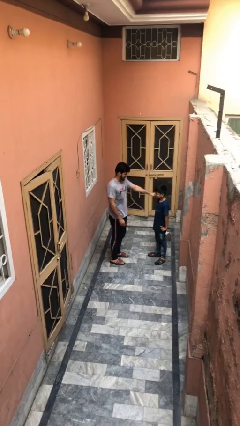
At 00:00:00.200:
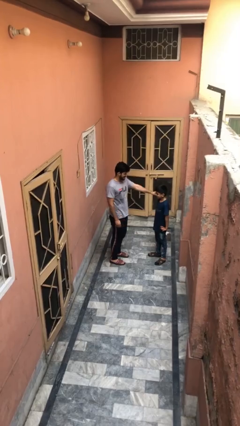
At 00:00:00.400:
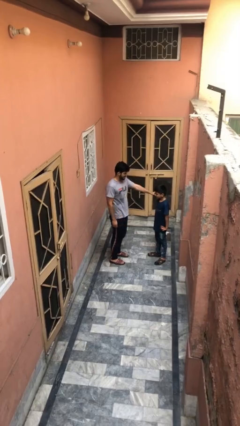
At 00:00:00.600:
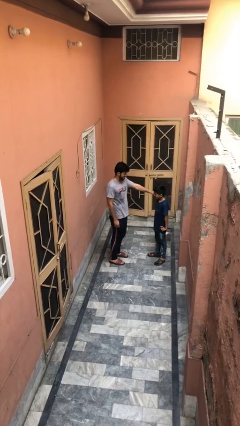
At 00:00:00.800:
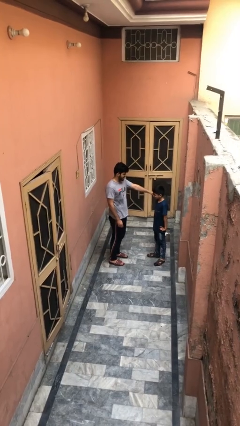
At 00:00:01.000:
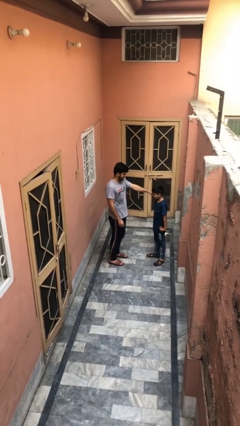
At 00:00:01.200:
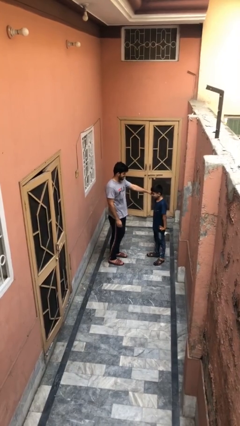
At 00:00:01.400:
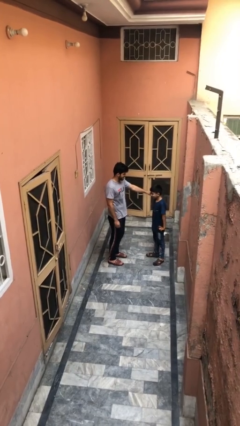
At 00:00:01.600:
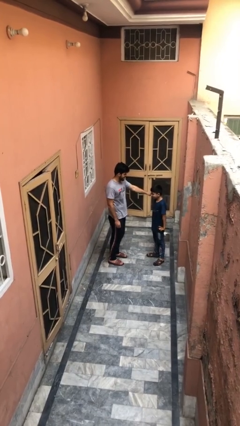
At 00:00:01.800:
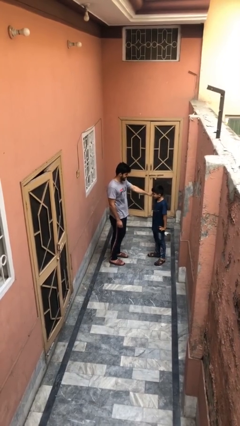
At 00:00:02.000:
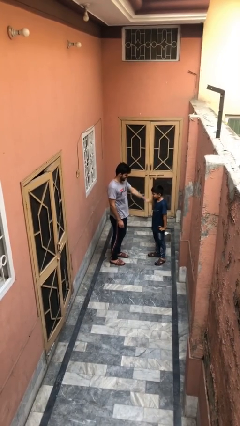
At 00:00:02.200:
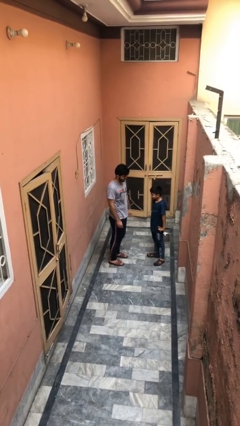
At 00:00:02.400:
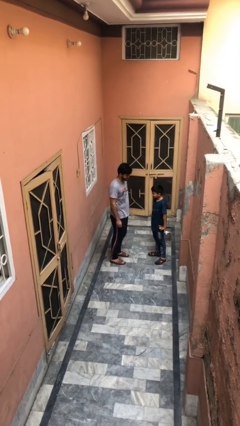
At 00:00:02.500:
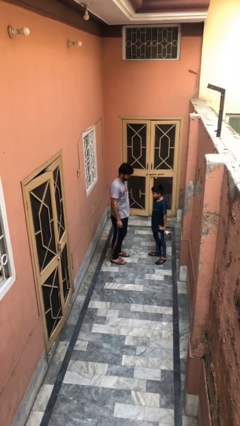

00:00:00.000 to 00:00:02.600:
person touches face of person

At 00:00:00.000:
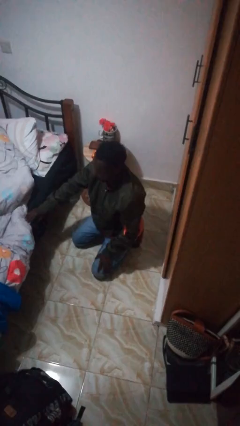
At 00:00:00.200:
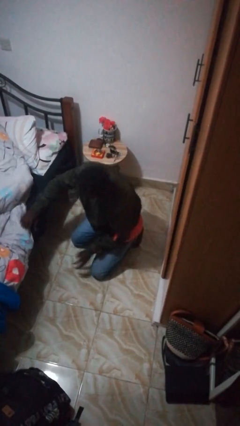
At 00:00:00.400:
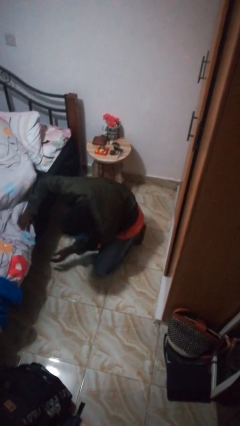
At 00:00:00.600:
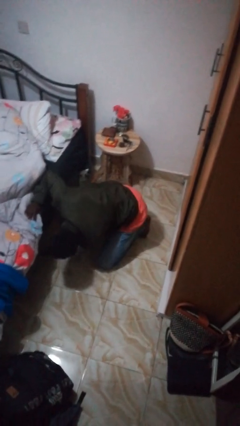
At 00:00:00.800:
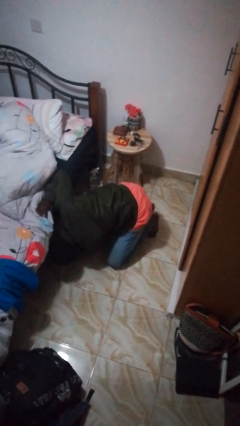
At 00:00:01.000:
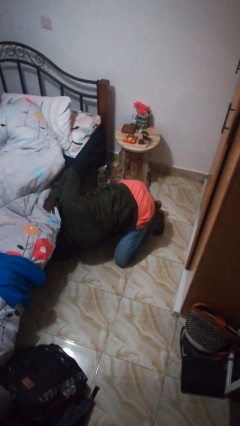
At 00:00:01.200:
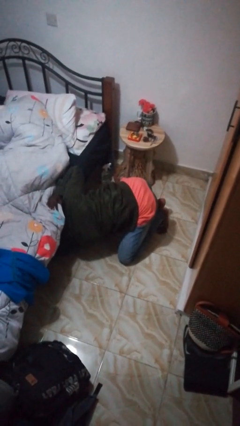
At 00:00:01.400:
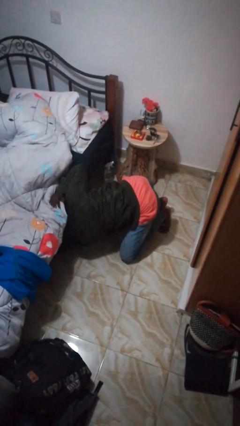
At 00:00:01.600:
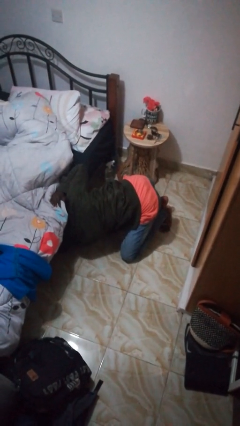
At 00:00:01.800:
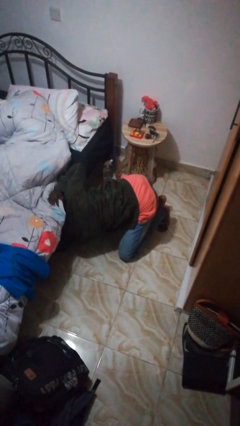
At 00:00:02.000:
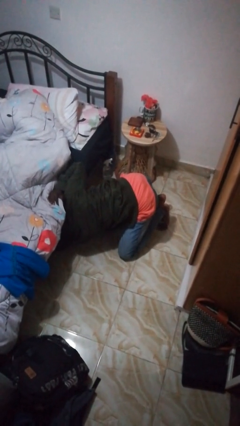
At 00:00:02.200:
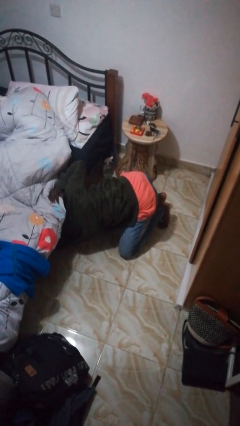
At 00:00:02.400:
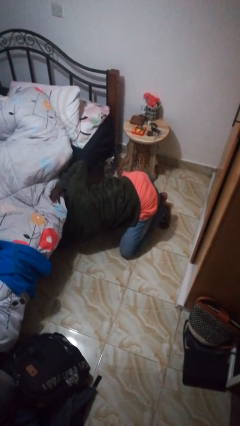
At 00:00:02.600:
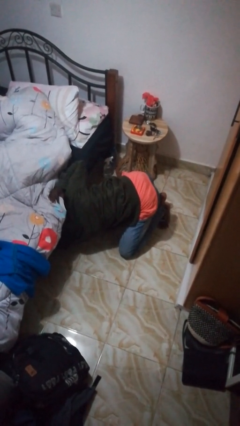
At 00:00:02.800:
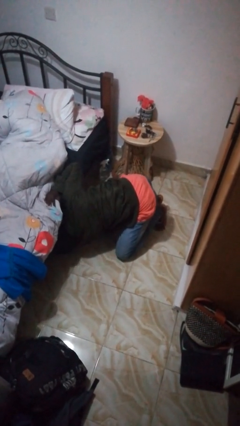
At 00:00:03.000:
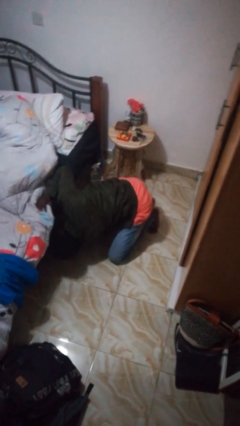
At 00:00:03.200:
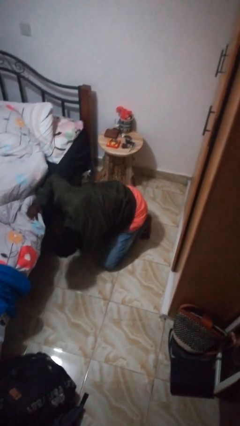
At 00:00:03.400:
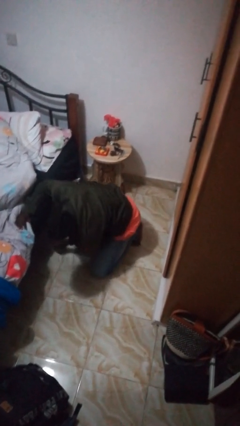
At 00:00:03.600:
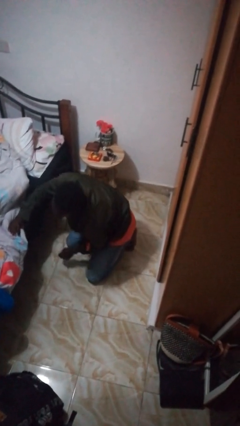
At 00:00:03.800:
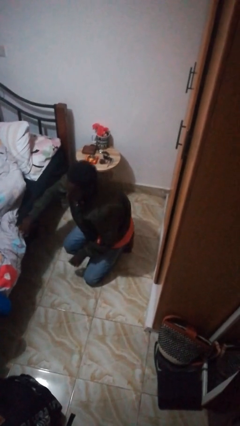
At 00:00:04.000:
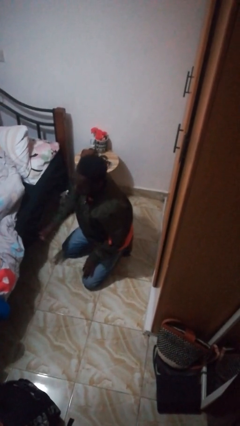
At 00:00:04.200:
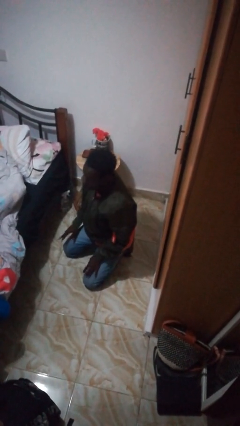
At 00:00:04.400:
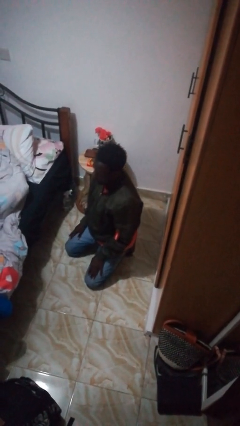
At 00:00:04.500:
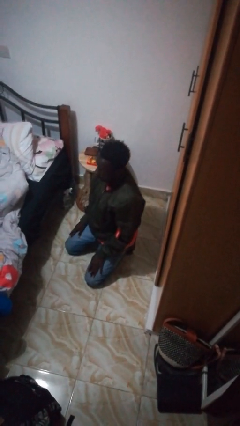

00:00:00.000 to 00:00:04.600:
person searches under bed

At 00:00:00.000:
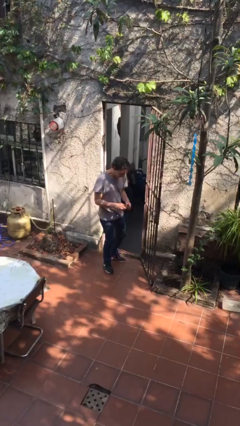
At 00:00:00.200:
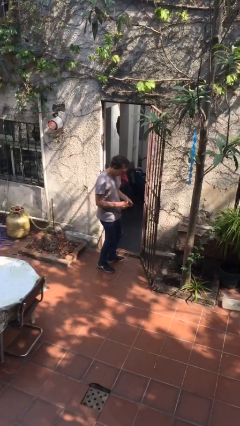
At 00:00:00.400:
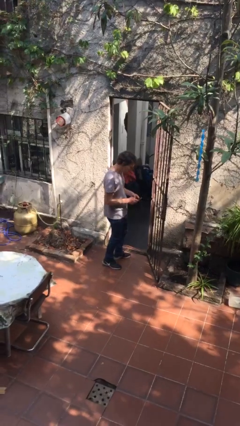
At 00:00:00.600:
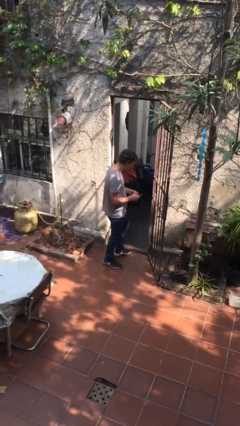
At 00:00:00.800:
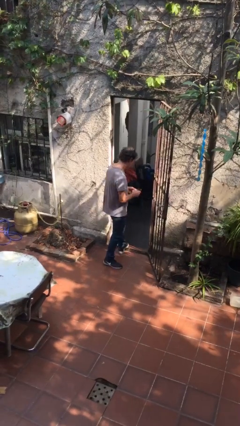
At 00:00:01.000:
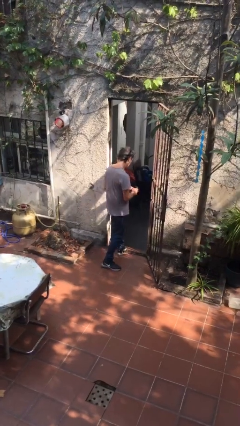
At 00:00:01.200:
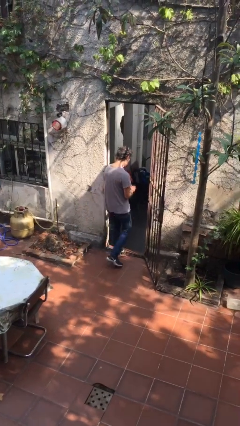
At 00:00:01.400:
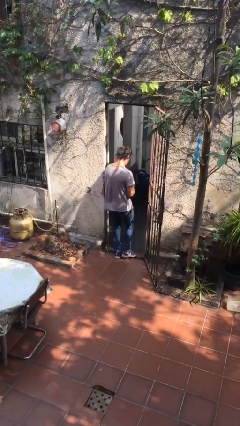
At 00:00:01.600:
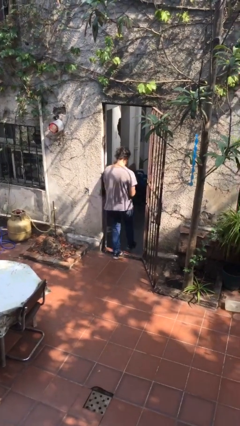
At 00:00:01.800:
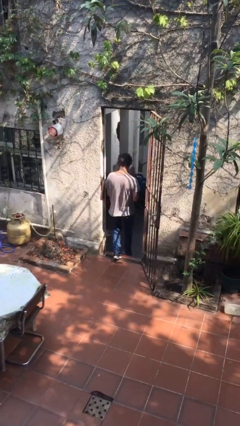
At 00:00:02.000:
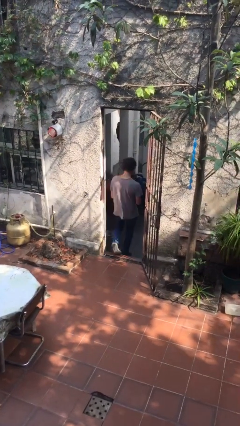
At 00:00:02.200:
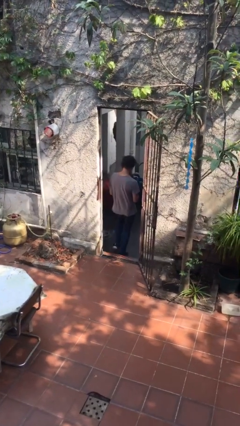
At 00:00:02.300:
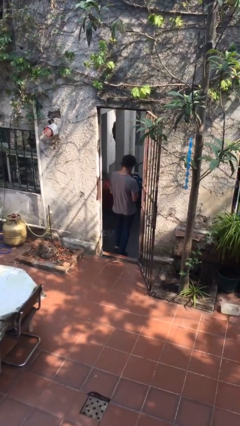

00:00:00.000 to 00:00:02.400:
person exits scene through structure

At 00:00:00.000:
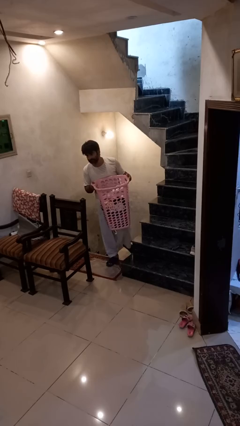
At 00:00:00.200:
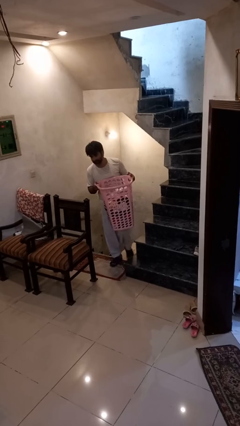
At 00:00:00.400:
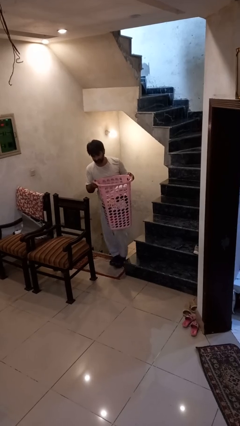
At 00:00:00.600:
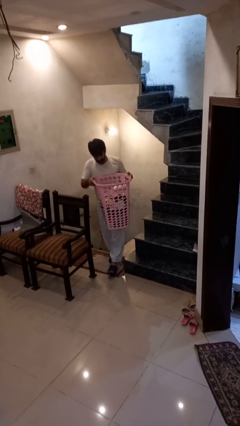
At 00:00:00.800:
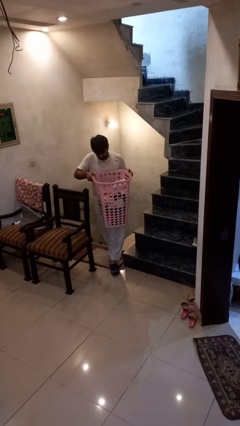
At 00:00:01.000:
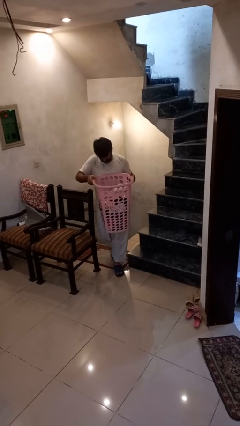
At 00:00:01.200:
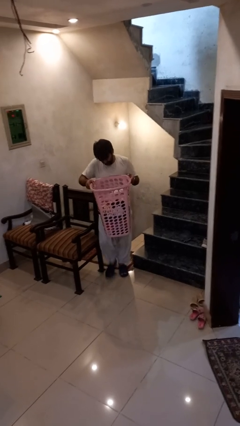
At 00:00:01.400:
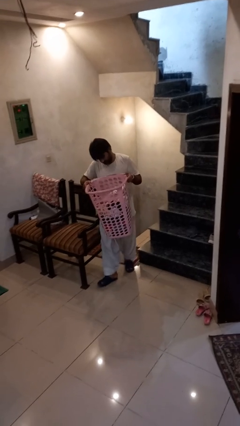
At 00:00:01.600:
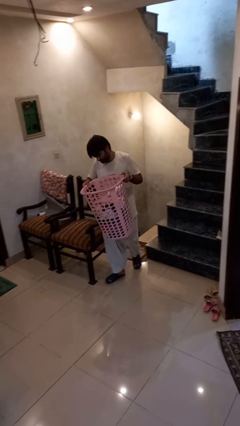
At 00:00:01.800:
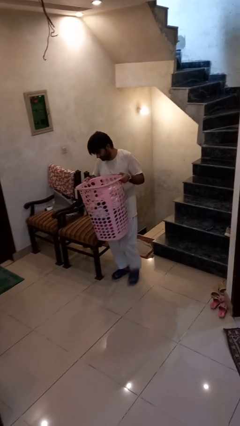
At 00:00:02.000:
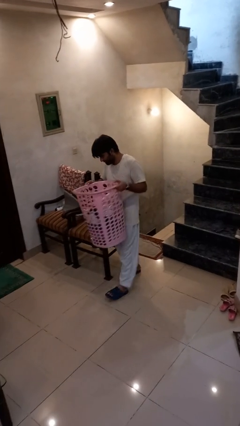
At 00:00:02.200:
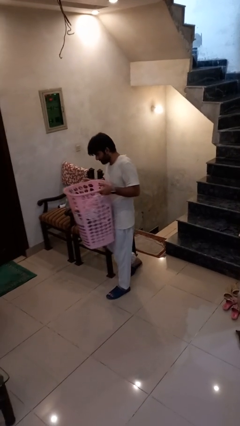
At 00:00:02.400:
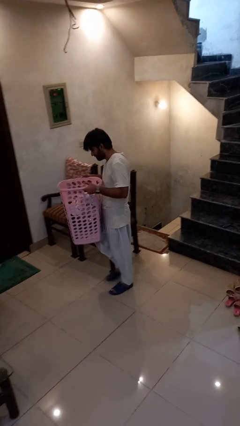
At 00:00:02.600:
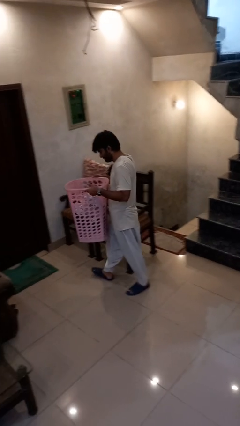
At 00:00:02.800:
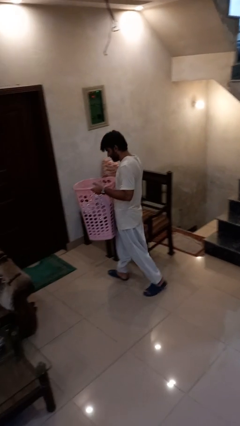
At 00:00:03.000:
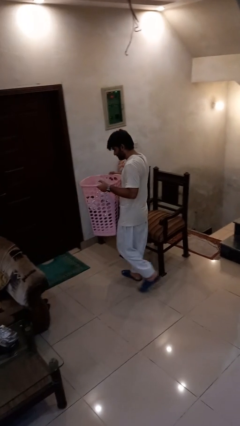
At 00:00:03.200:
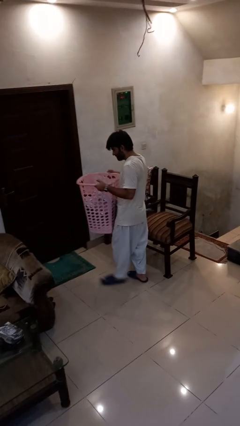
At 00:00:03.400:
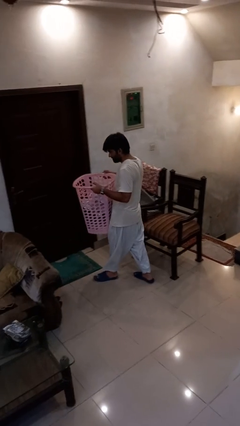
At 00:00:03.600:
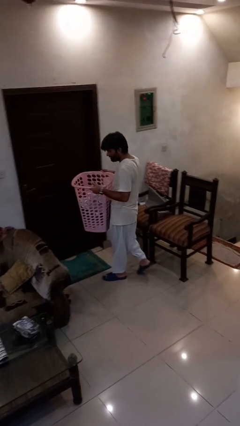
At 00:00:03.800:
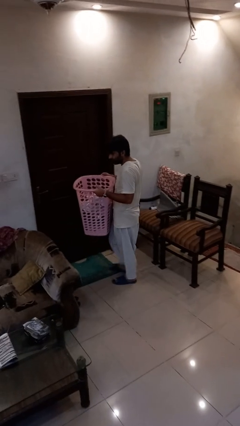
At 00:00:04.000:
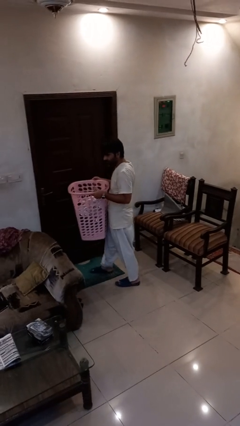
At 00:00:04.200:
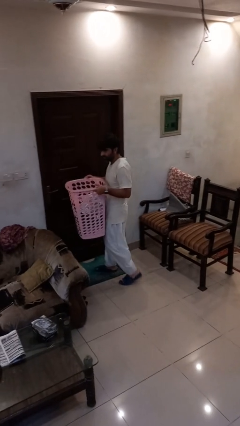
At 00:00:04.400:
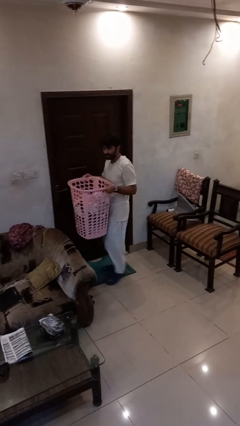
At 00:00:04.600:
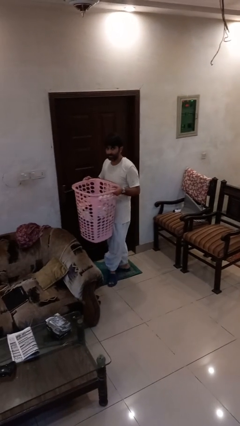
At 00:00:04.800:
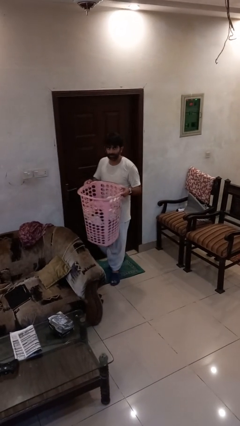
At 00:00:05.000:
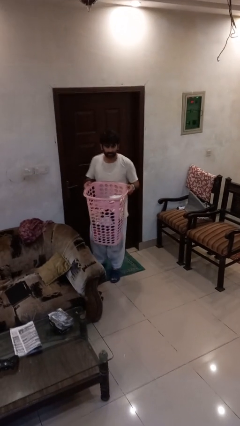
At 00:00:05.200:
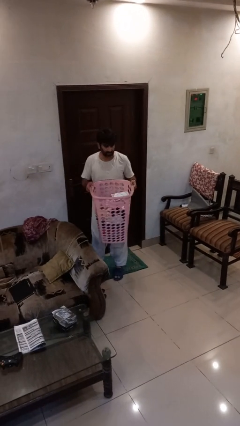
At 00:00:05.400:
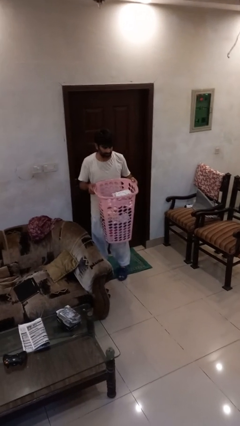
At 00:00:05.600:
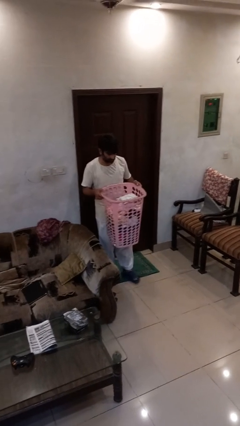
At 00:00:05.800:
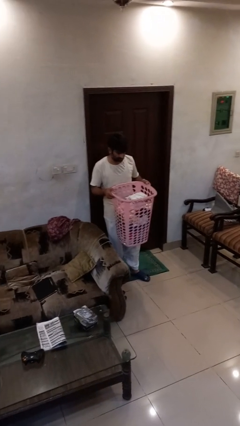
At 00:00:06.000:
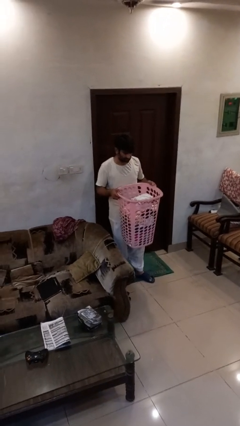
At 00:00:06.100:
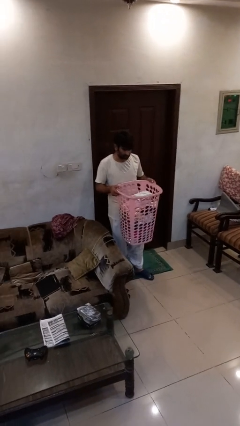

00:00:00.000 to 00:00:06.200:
person carries laundry basket

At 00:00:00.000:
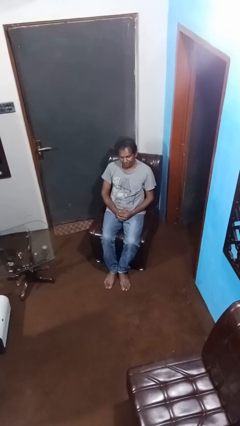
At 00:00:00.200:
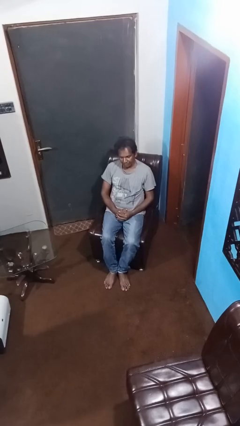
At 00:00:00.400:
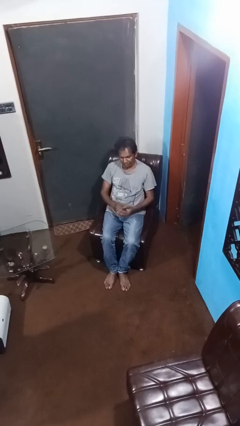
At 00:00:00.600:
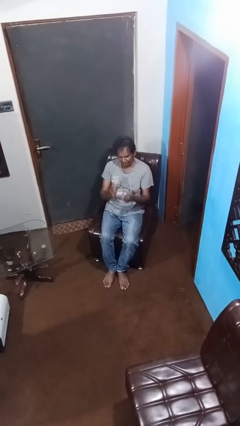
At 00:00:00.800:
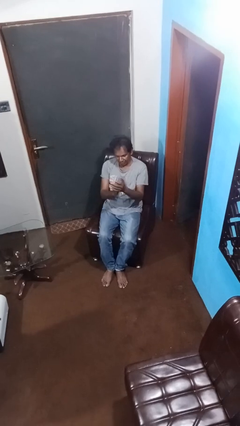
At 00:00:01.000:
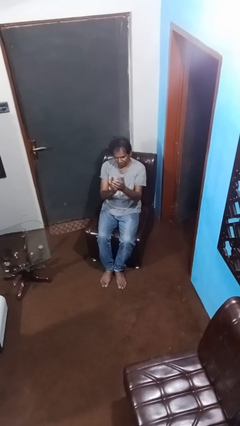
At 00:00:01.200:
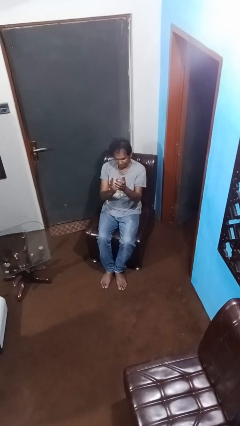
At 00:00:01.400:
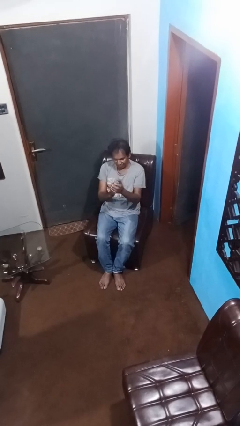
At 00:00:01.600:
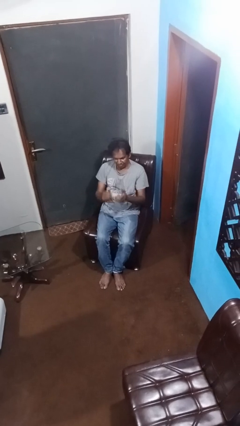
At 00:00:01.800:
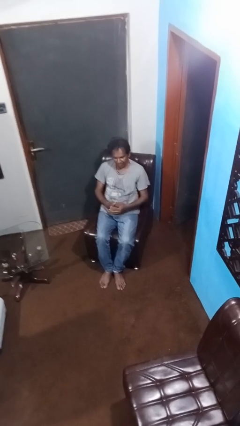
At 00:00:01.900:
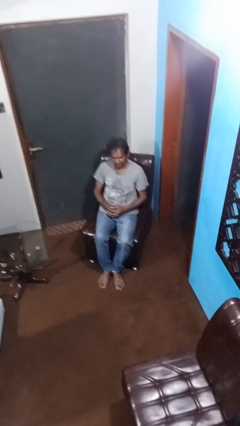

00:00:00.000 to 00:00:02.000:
person claps hands
